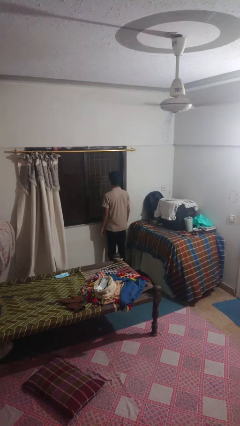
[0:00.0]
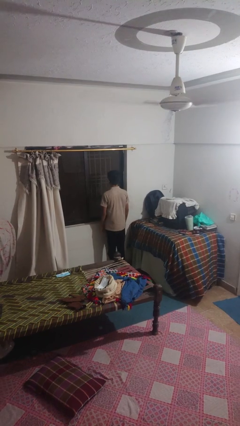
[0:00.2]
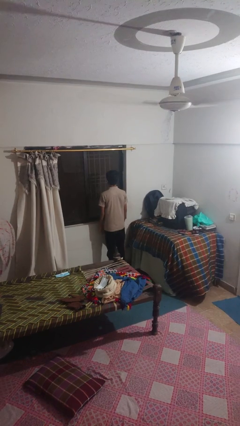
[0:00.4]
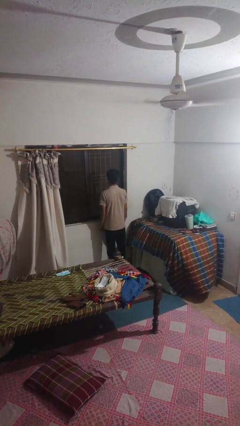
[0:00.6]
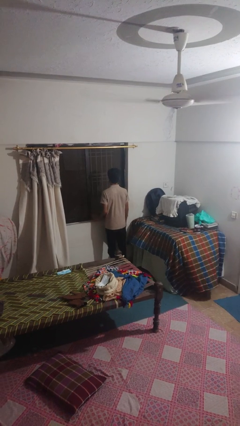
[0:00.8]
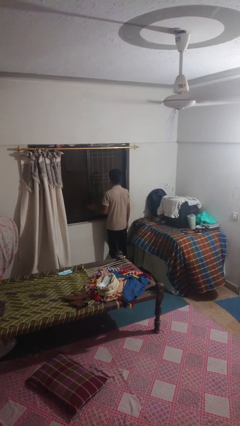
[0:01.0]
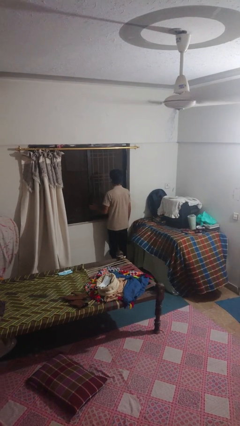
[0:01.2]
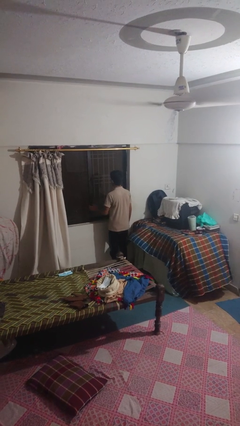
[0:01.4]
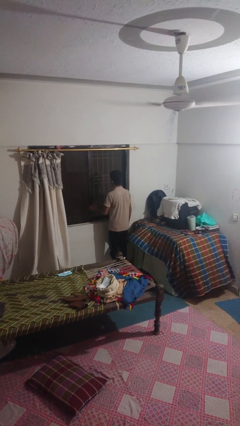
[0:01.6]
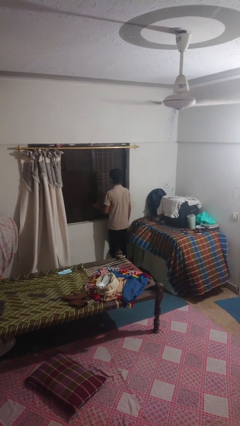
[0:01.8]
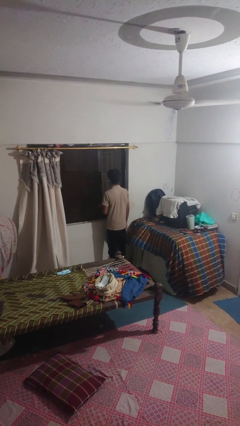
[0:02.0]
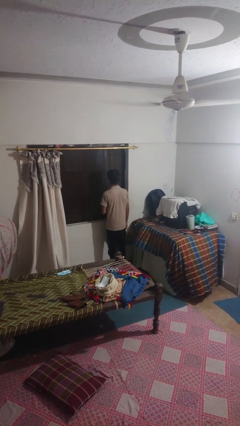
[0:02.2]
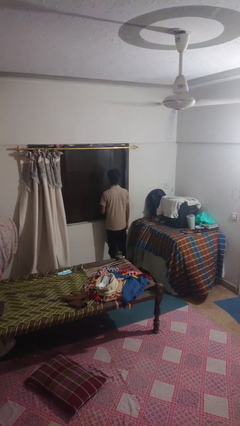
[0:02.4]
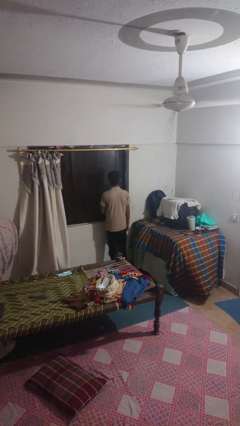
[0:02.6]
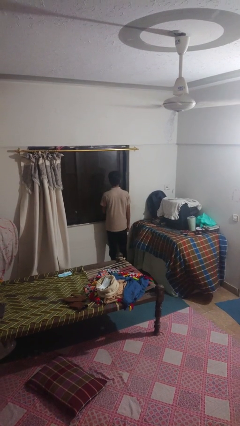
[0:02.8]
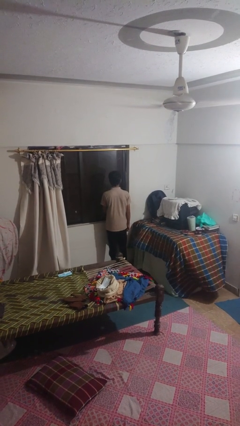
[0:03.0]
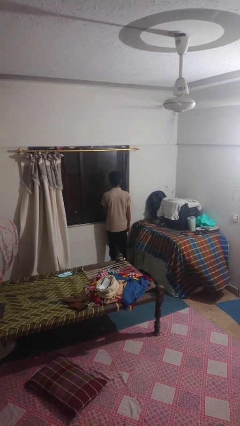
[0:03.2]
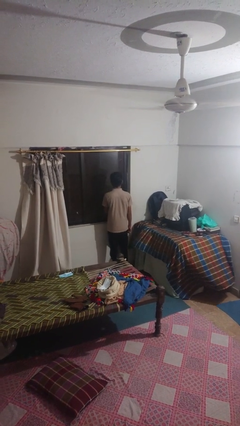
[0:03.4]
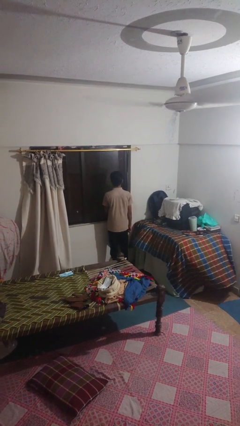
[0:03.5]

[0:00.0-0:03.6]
person closes sliding door

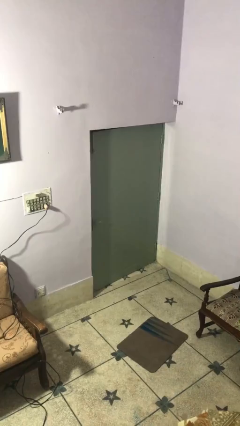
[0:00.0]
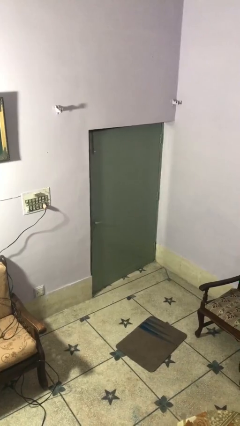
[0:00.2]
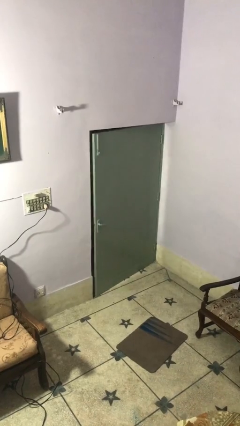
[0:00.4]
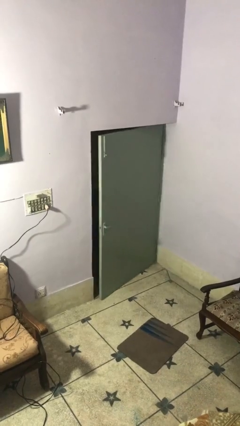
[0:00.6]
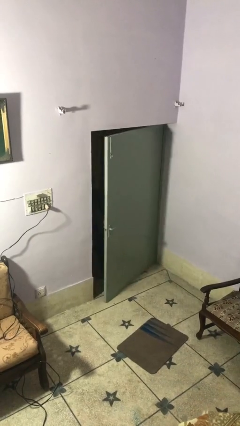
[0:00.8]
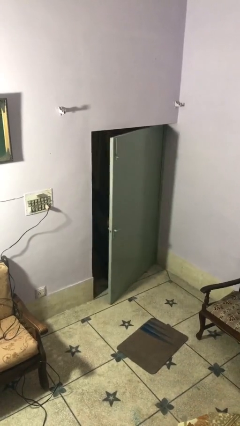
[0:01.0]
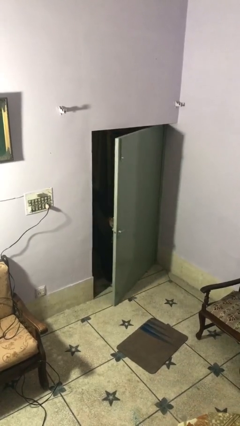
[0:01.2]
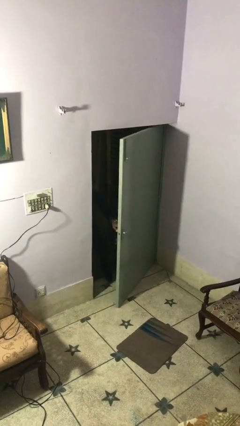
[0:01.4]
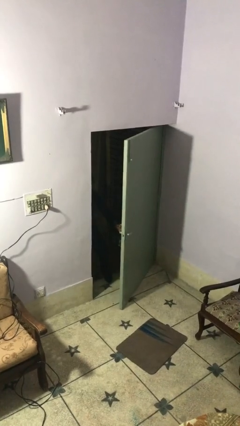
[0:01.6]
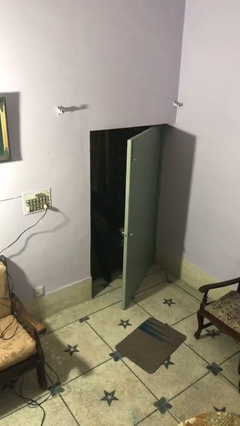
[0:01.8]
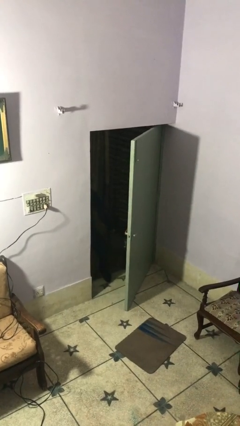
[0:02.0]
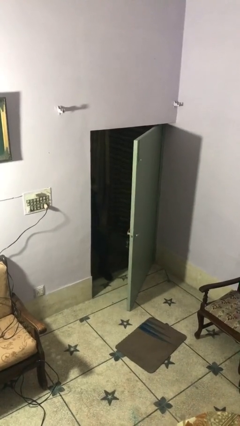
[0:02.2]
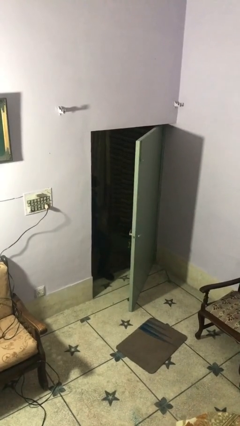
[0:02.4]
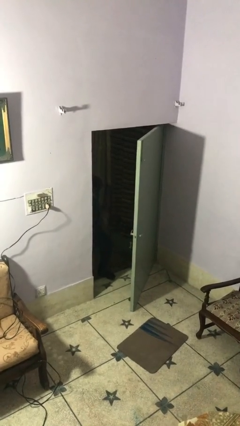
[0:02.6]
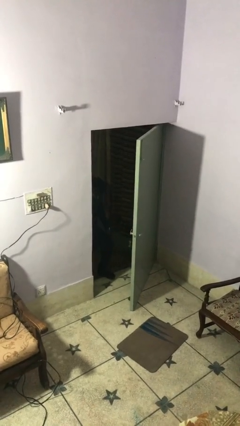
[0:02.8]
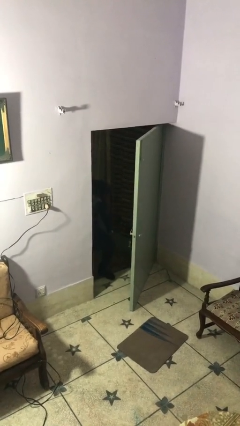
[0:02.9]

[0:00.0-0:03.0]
person opens facility door

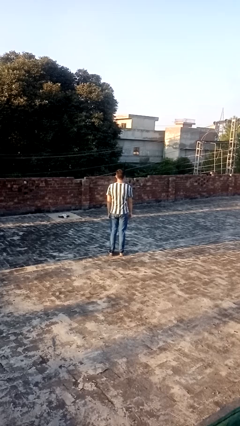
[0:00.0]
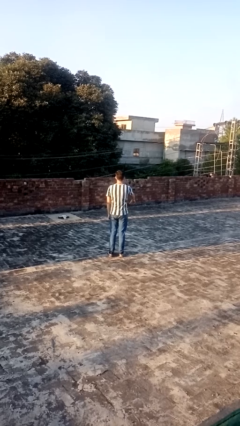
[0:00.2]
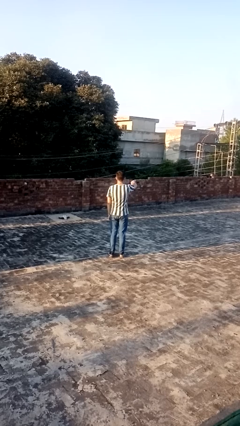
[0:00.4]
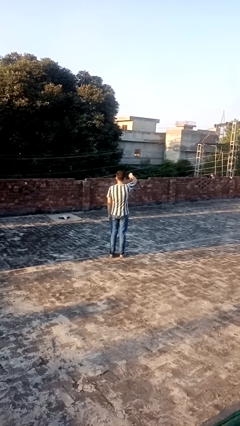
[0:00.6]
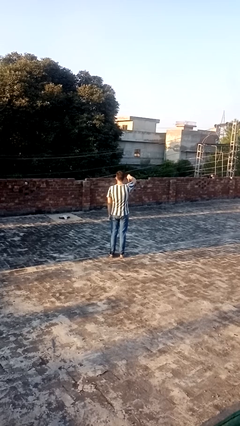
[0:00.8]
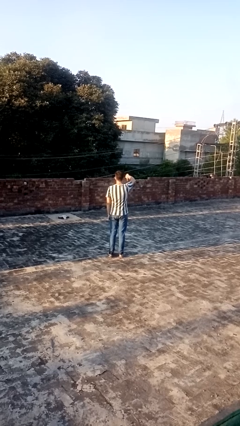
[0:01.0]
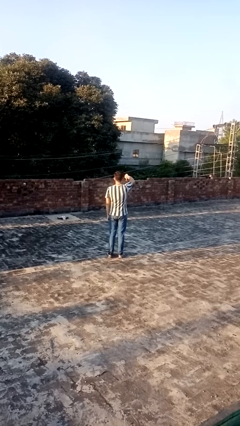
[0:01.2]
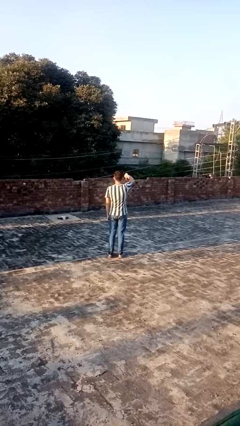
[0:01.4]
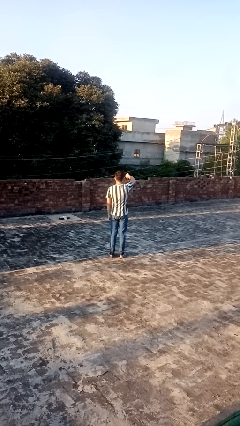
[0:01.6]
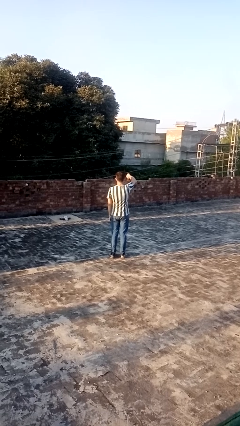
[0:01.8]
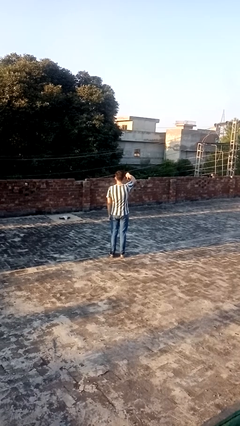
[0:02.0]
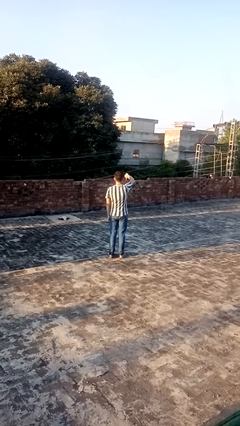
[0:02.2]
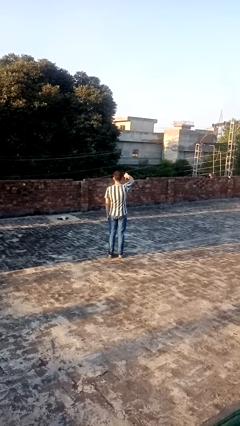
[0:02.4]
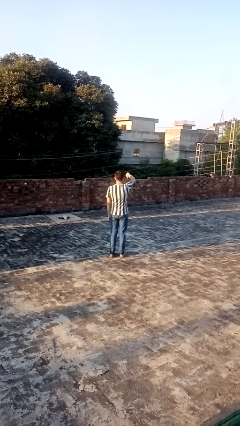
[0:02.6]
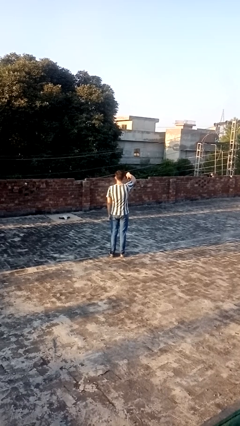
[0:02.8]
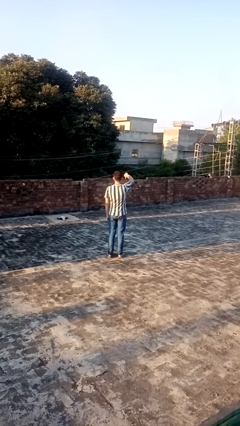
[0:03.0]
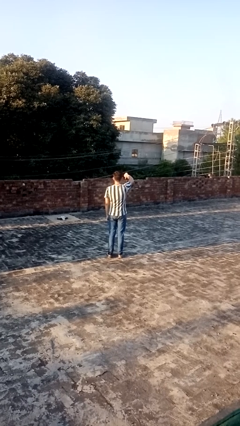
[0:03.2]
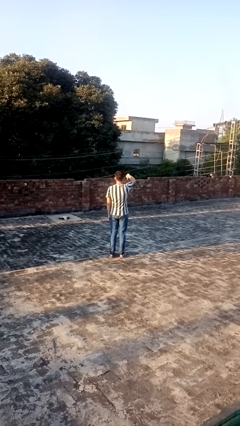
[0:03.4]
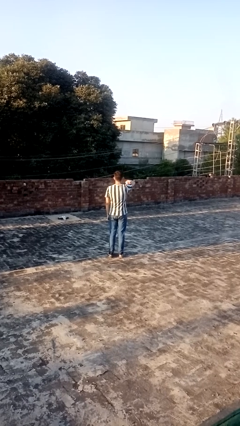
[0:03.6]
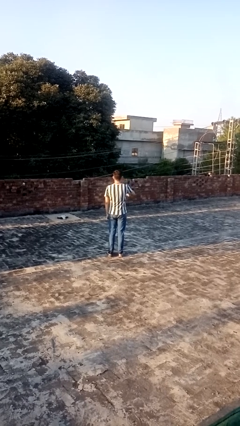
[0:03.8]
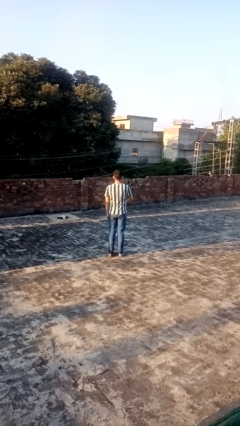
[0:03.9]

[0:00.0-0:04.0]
person gestures thumbs down

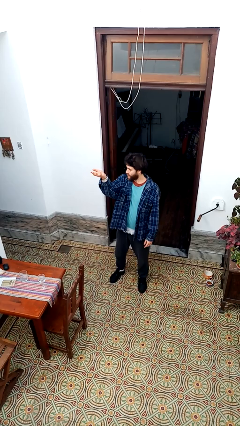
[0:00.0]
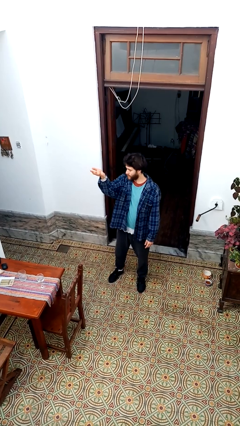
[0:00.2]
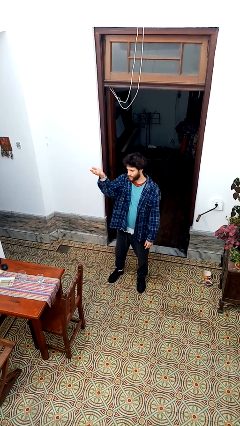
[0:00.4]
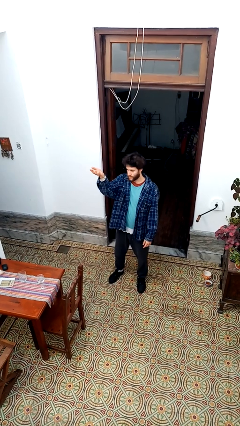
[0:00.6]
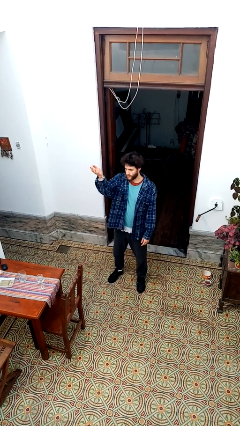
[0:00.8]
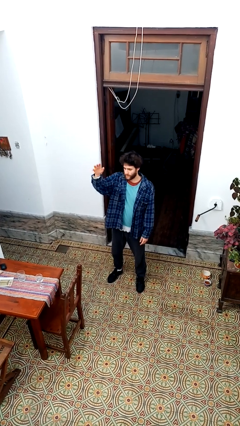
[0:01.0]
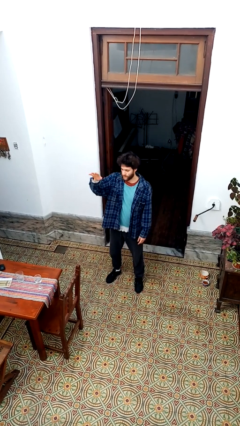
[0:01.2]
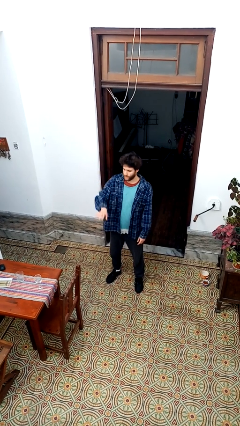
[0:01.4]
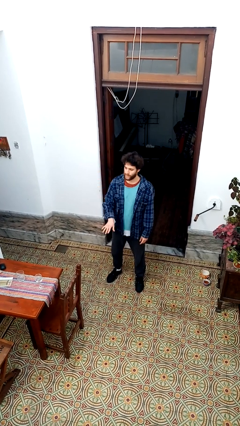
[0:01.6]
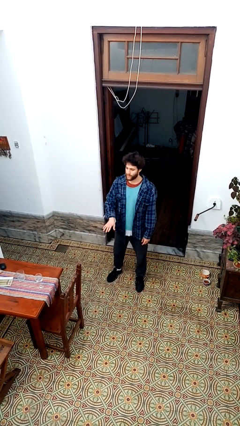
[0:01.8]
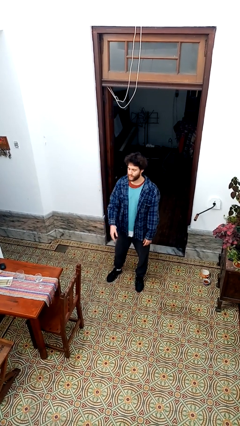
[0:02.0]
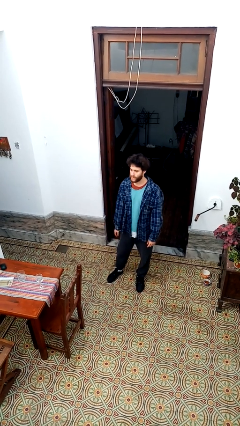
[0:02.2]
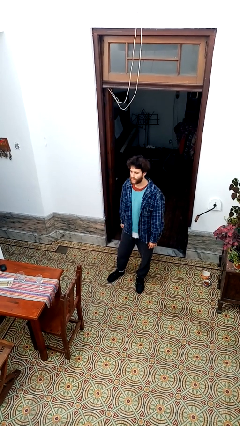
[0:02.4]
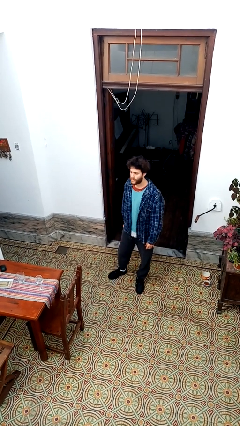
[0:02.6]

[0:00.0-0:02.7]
person gestures swipe down

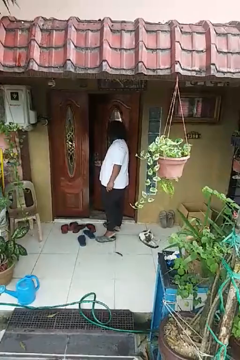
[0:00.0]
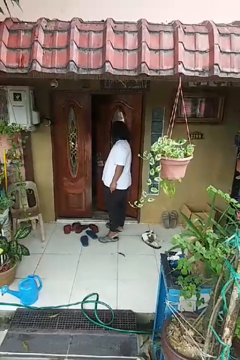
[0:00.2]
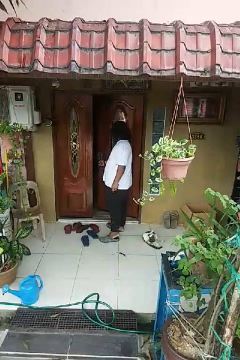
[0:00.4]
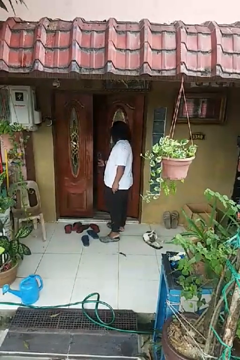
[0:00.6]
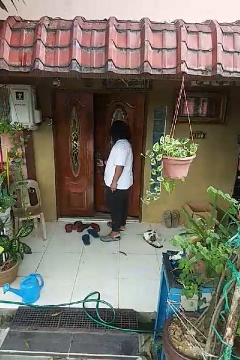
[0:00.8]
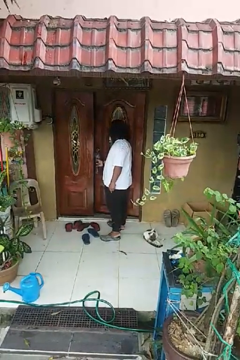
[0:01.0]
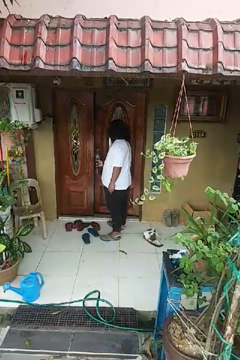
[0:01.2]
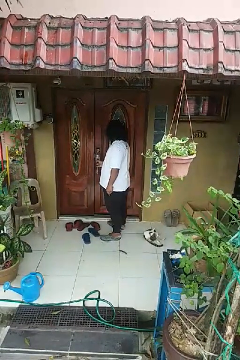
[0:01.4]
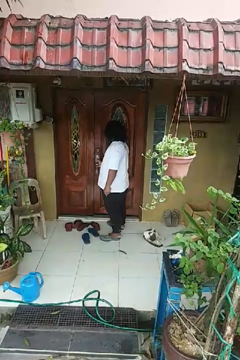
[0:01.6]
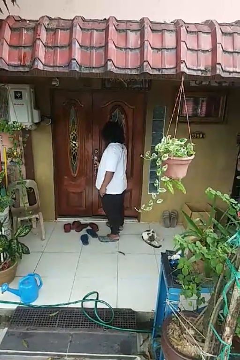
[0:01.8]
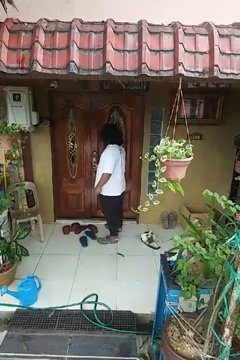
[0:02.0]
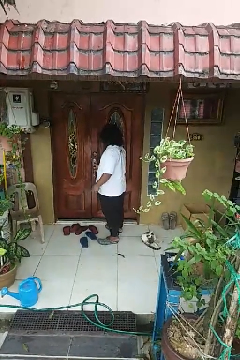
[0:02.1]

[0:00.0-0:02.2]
person closes facility door

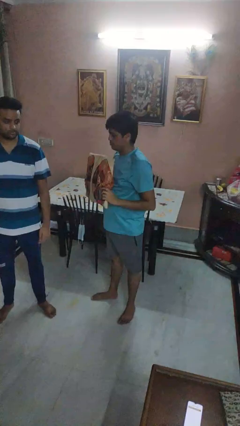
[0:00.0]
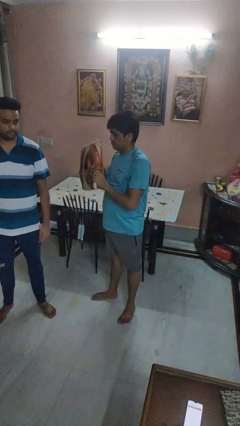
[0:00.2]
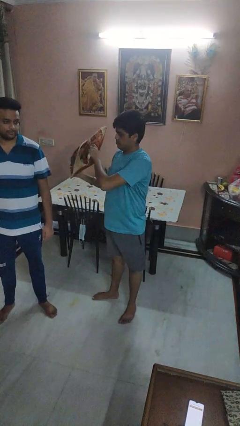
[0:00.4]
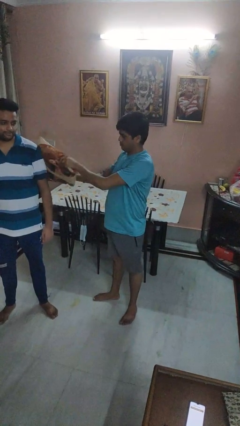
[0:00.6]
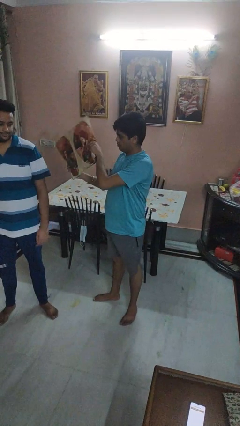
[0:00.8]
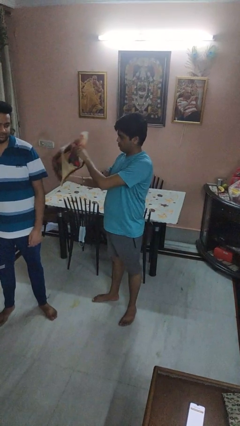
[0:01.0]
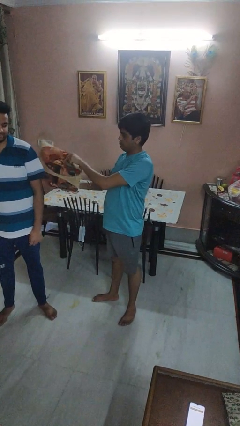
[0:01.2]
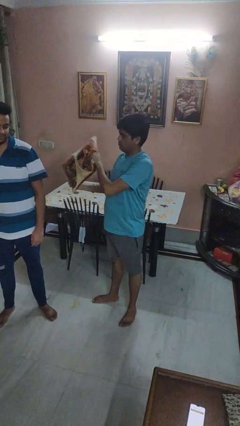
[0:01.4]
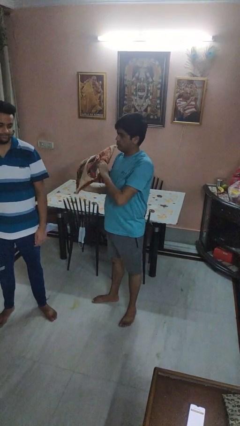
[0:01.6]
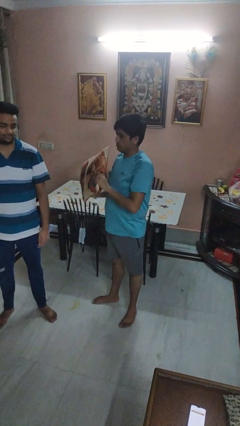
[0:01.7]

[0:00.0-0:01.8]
person hits person with pillow

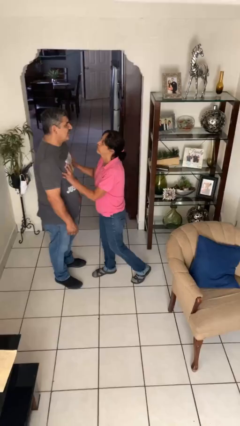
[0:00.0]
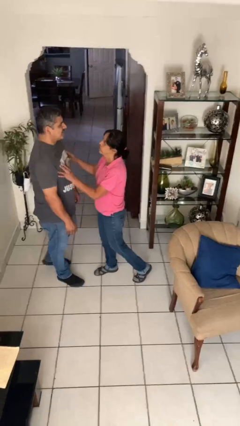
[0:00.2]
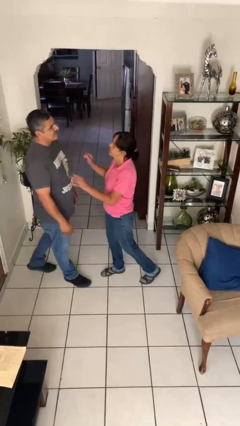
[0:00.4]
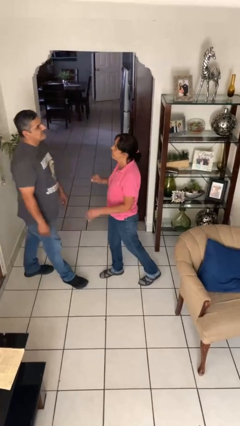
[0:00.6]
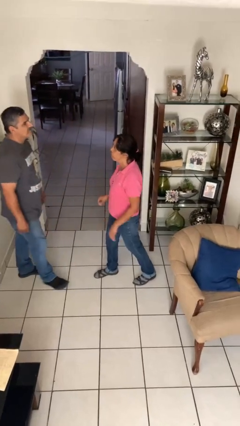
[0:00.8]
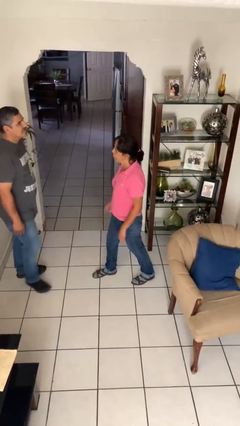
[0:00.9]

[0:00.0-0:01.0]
person shoves person
